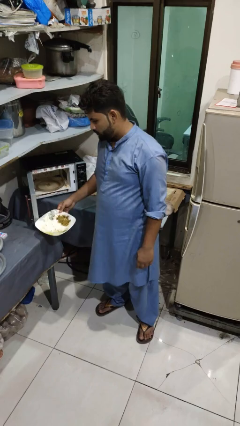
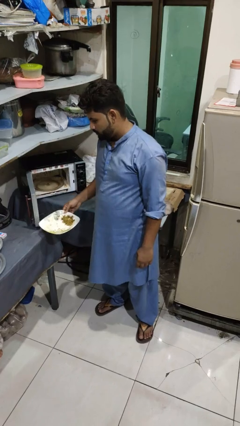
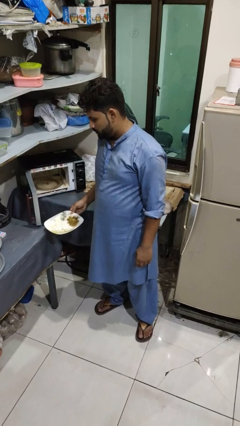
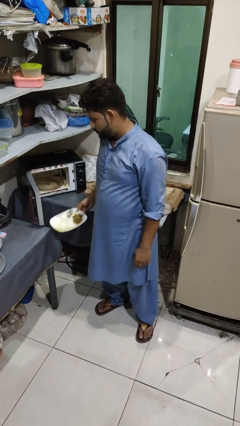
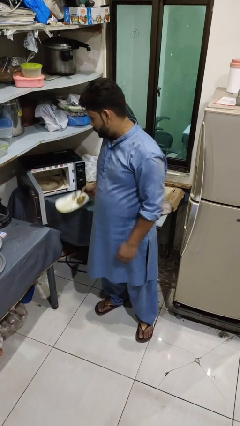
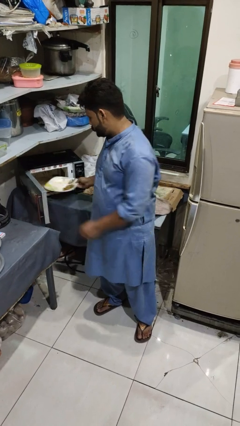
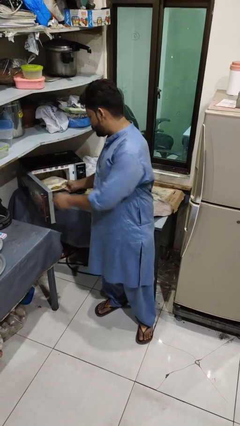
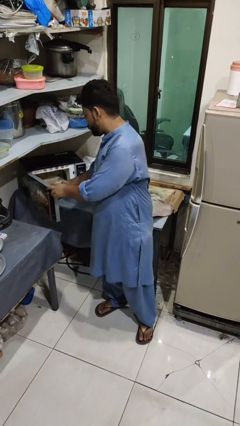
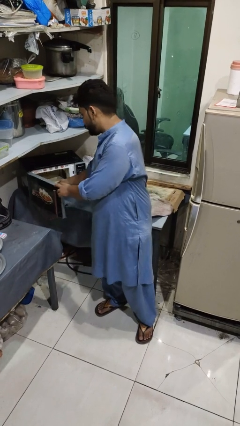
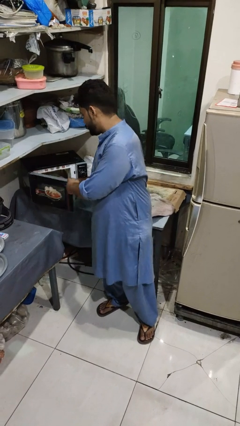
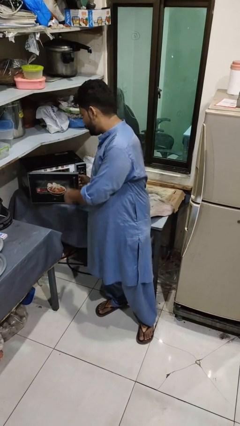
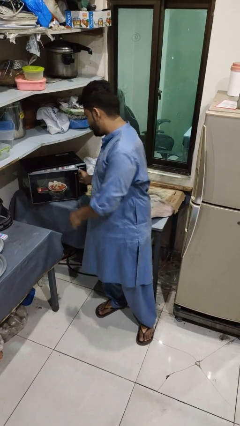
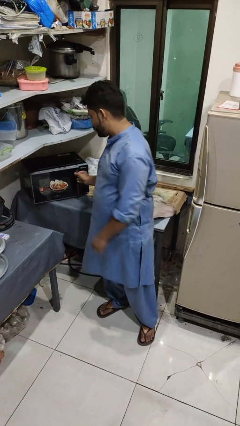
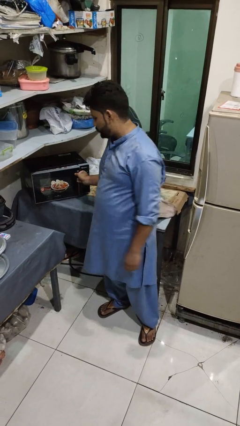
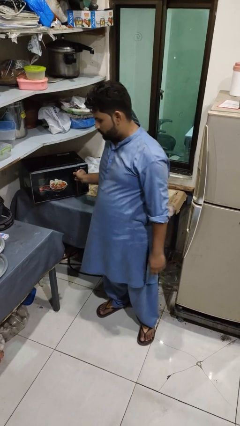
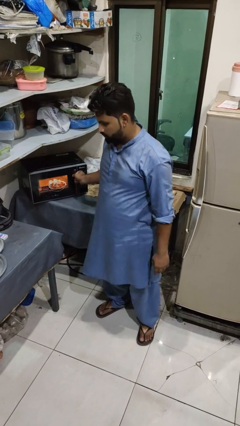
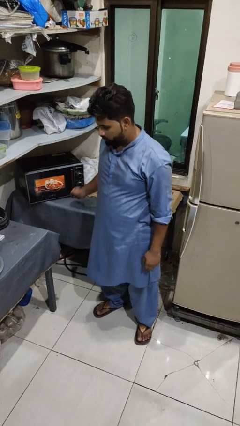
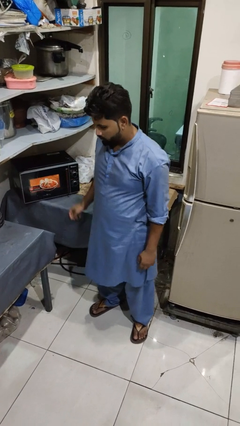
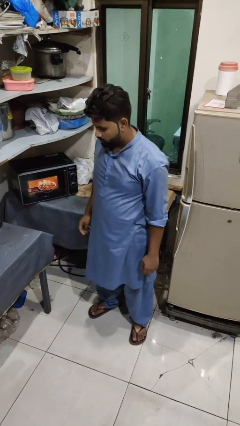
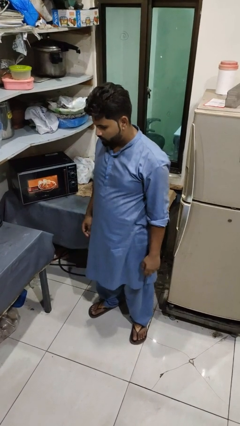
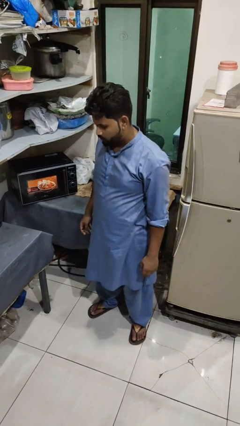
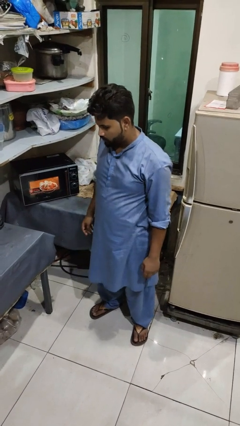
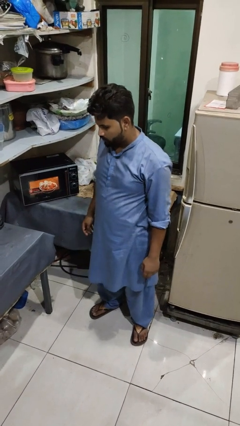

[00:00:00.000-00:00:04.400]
person puts object into microwave

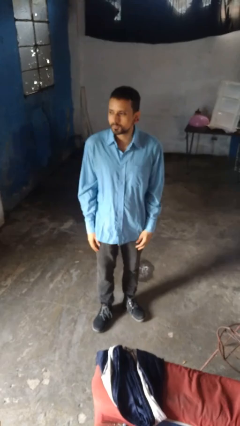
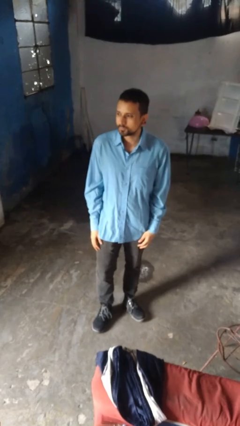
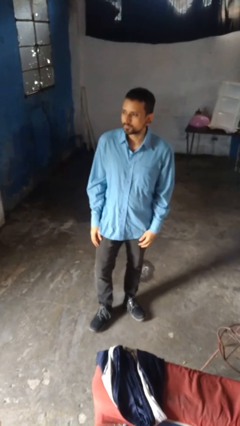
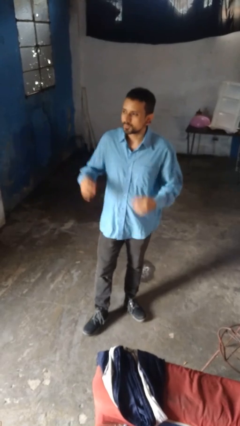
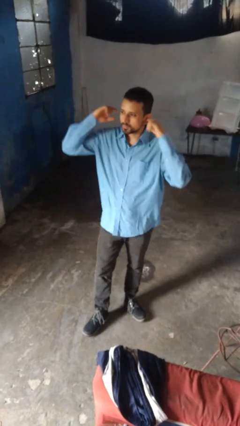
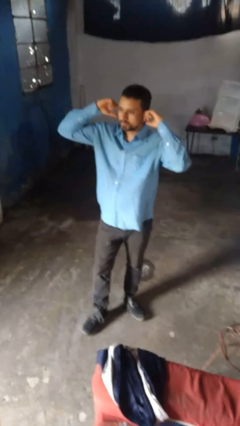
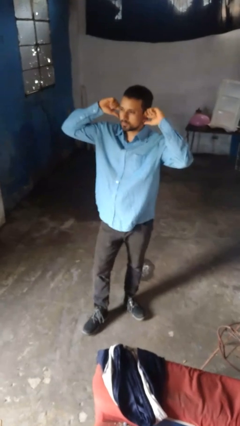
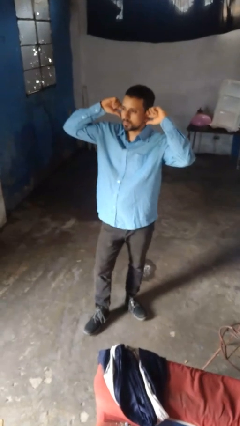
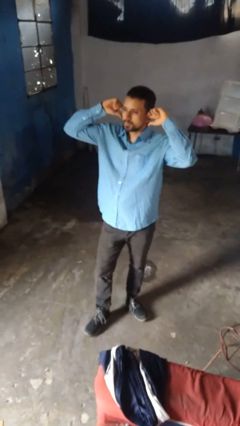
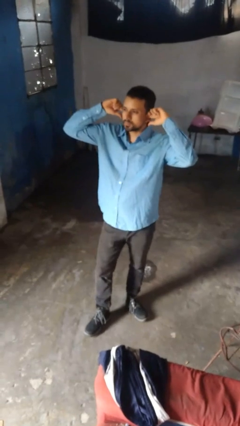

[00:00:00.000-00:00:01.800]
person puts fingers in ear

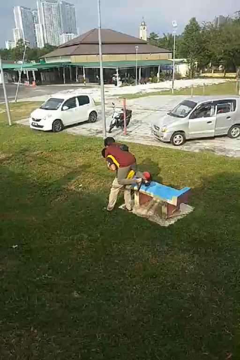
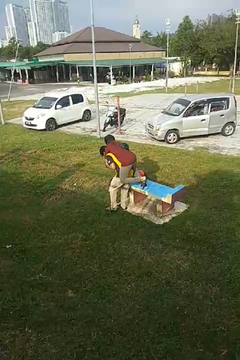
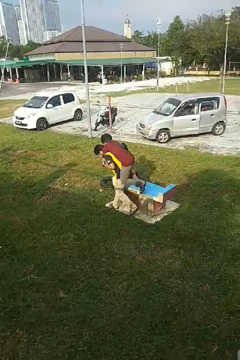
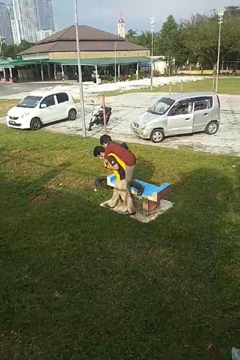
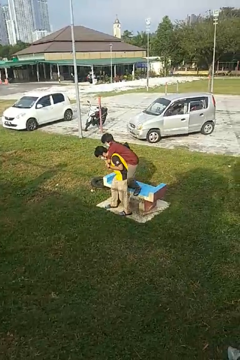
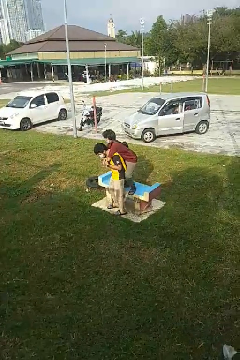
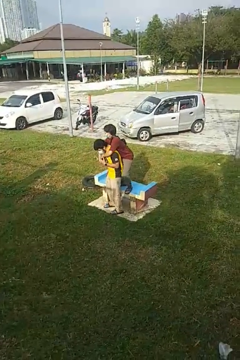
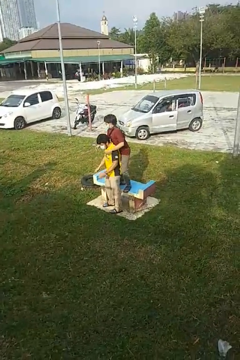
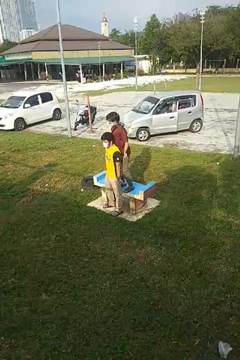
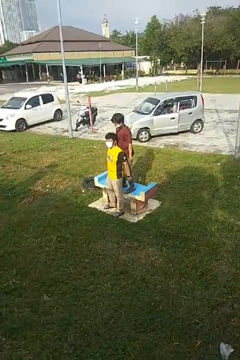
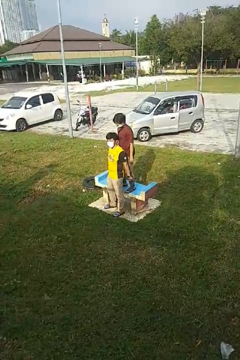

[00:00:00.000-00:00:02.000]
person puts down person

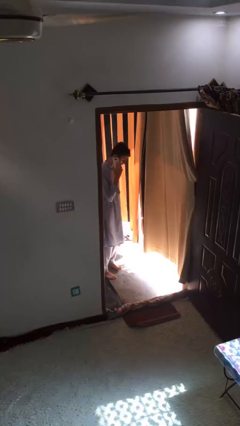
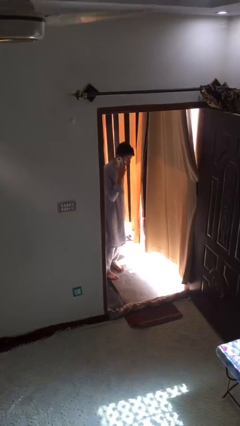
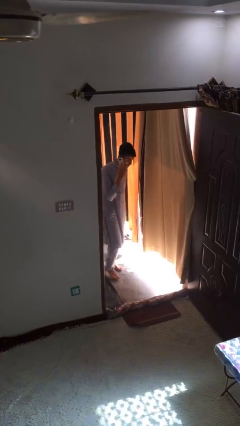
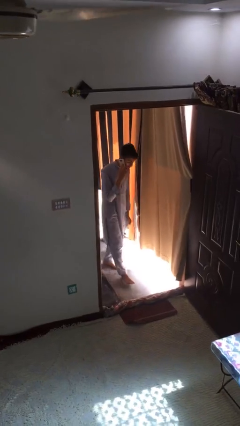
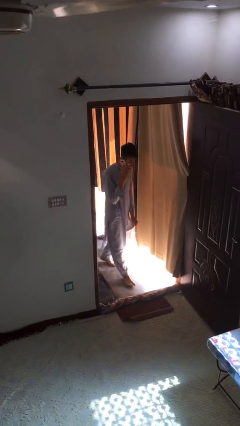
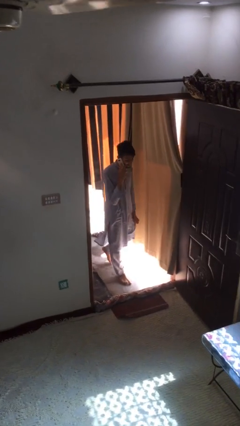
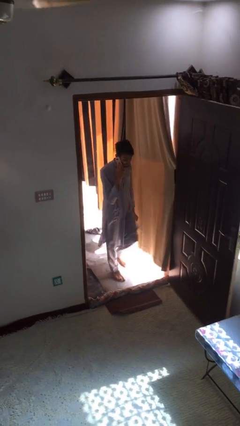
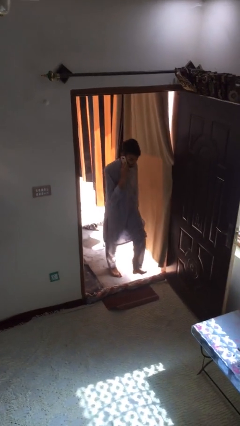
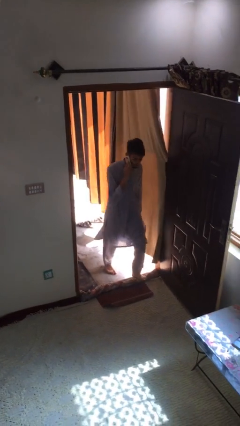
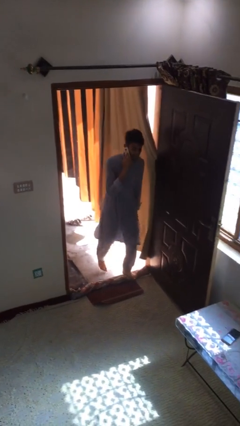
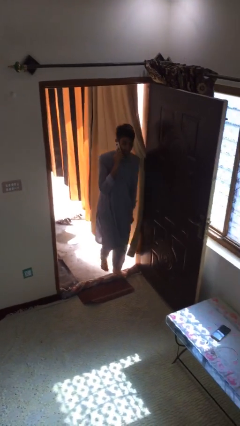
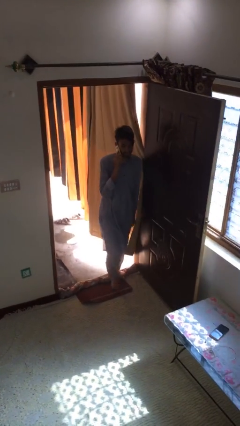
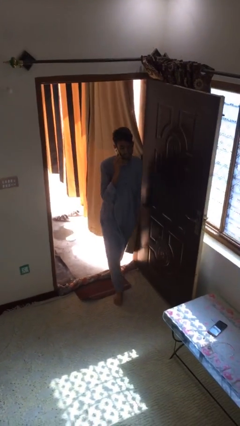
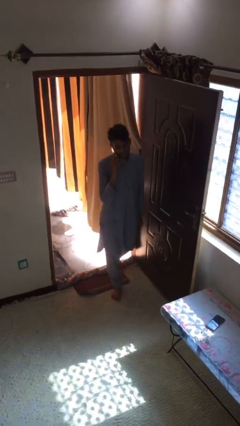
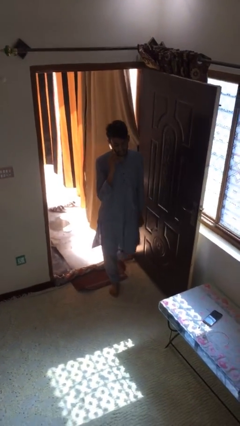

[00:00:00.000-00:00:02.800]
person enters scene through structure

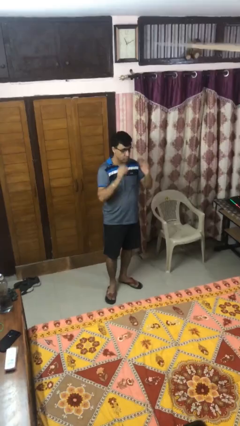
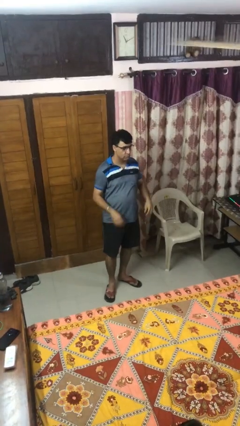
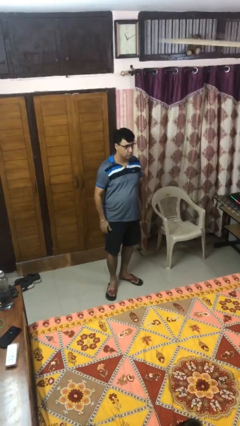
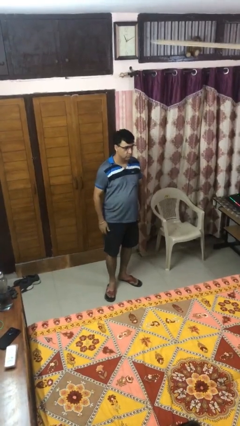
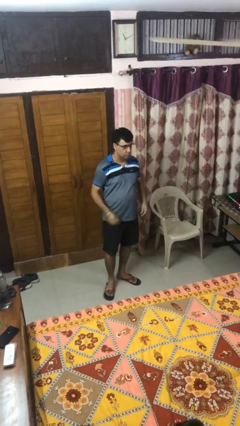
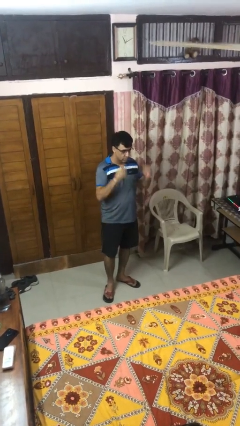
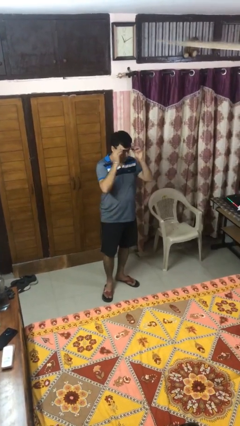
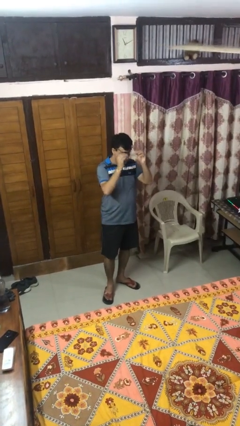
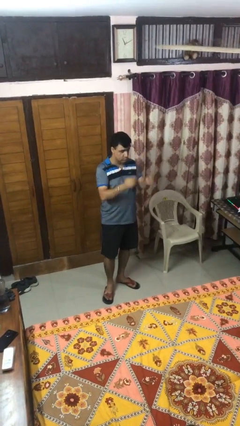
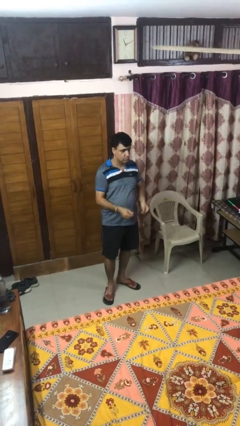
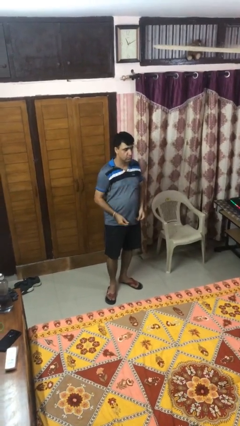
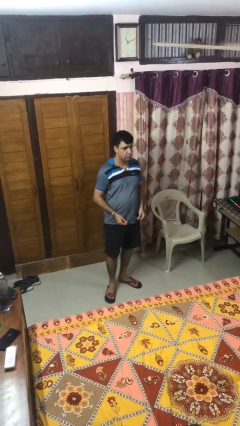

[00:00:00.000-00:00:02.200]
person takes off glasses

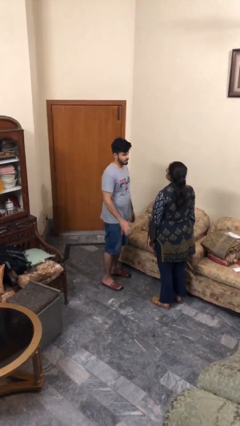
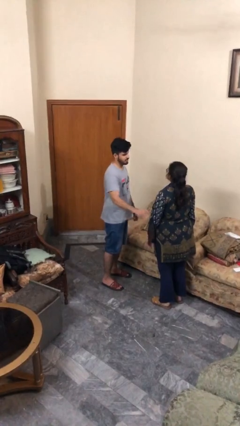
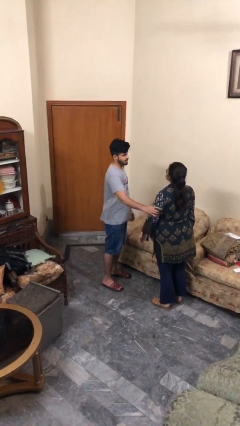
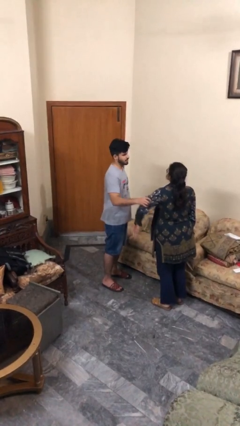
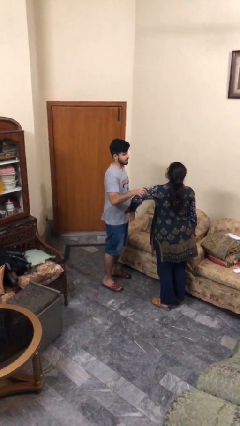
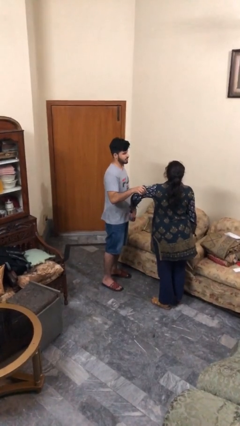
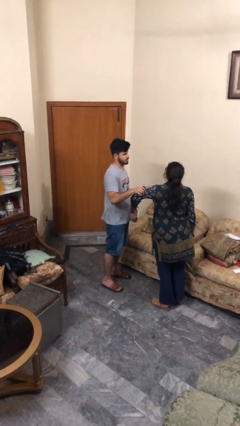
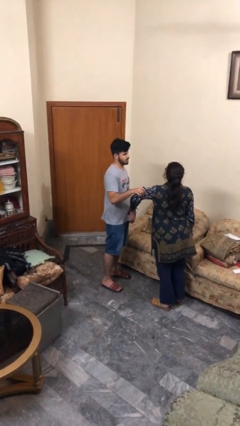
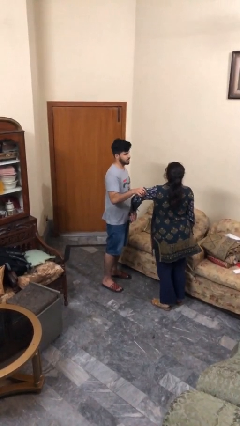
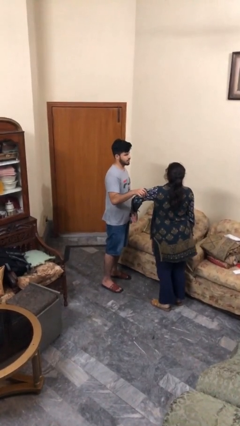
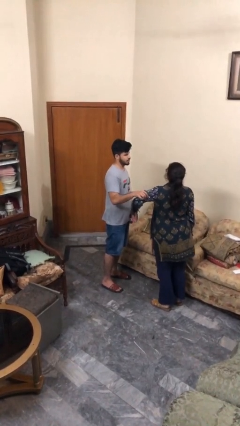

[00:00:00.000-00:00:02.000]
person grabs person by bicep

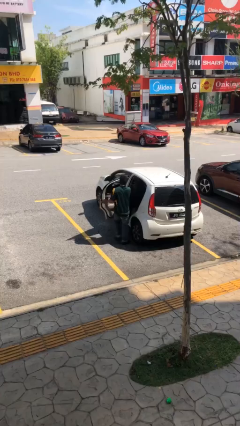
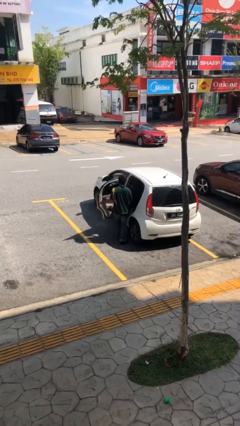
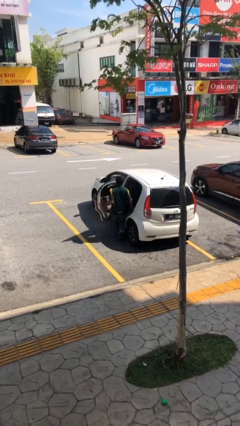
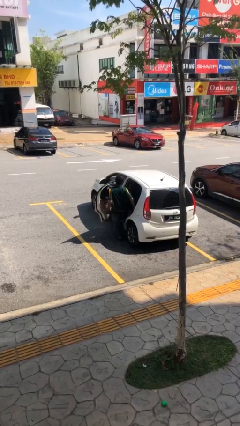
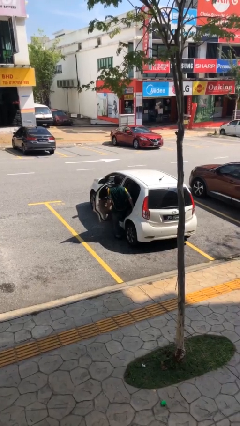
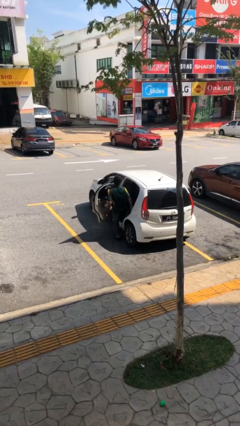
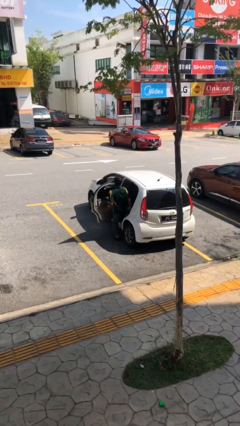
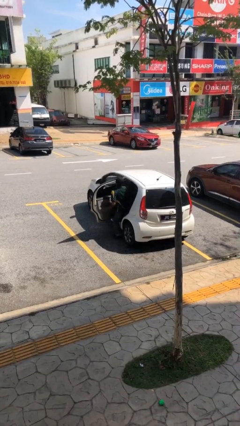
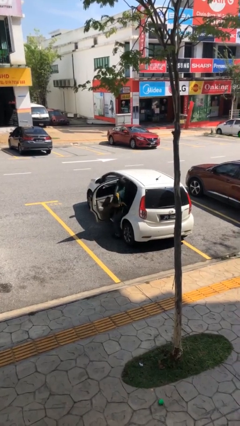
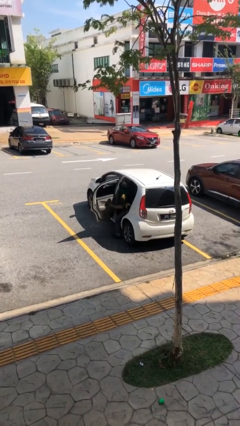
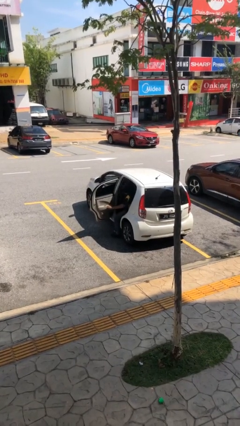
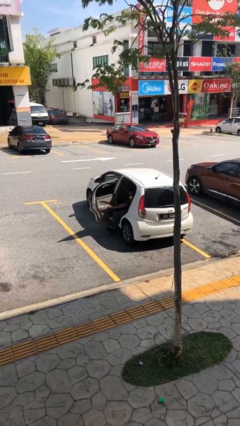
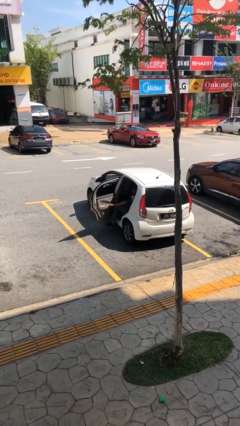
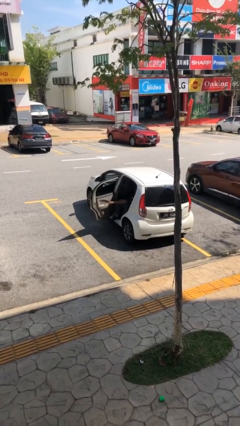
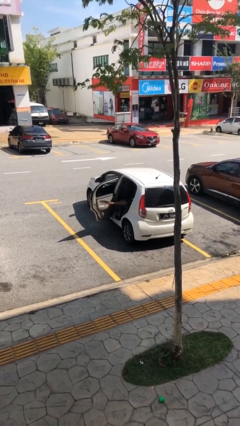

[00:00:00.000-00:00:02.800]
person enters car
